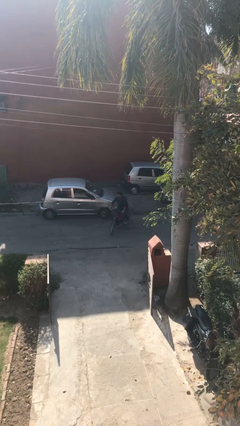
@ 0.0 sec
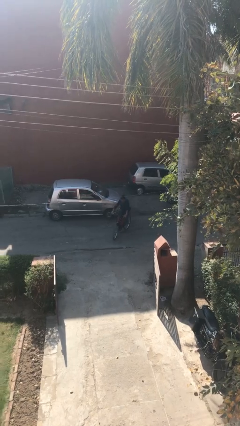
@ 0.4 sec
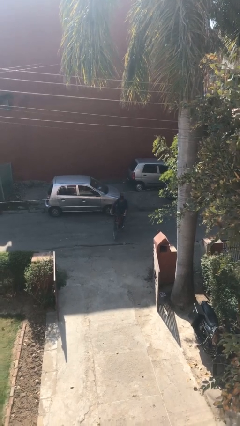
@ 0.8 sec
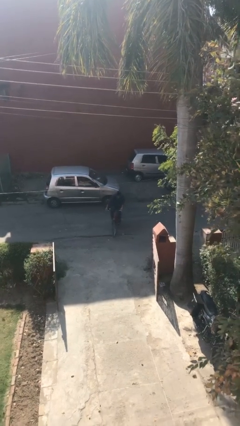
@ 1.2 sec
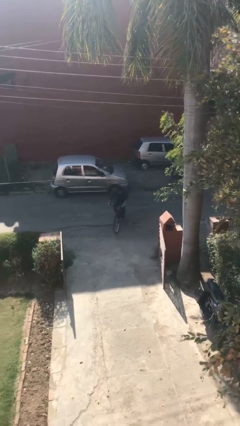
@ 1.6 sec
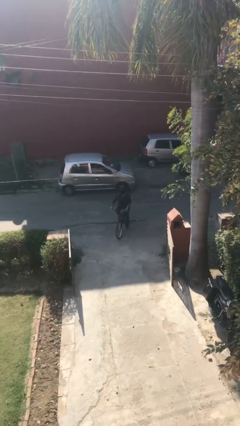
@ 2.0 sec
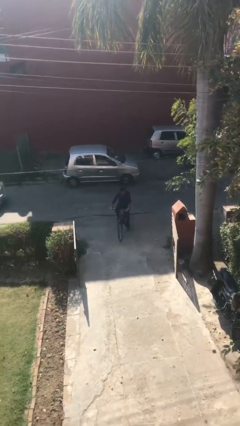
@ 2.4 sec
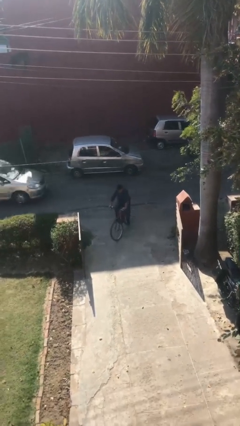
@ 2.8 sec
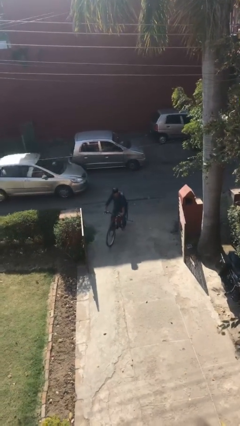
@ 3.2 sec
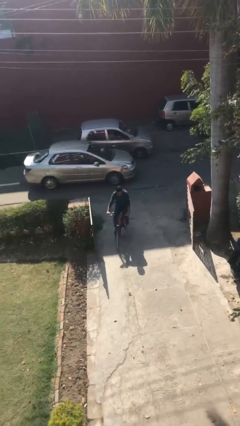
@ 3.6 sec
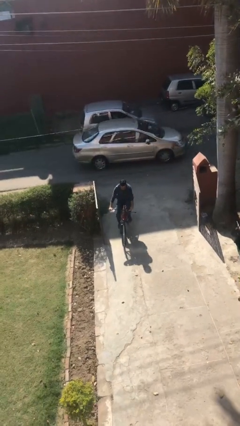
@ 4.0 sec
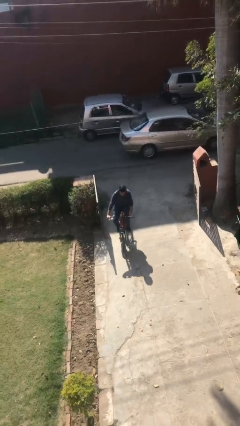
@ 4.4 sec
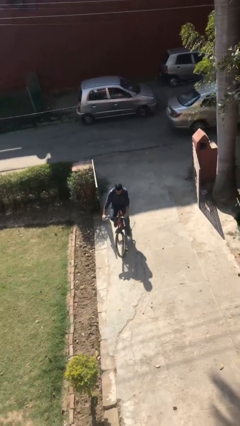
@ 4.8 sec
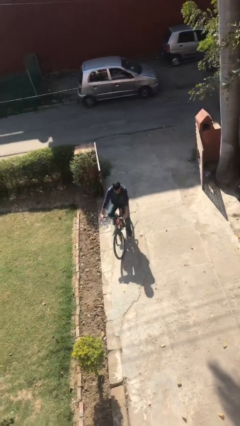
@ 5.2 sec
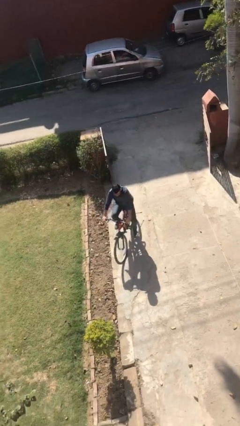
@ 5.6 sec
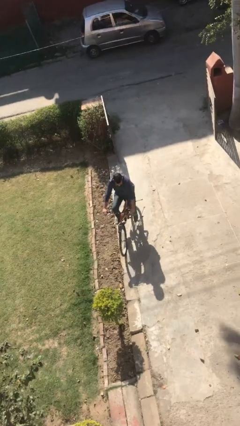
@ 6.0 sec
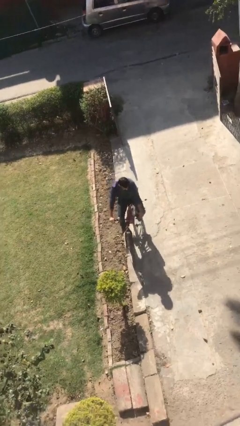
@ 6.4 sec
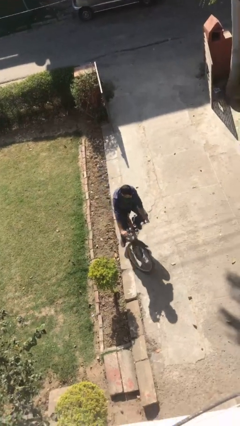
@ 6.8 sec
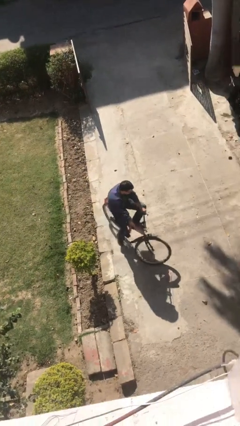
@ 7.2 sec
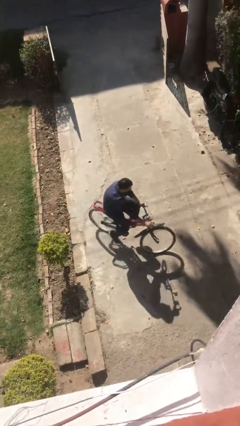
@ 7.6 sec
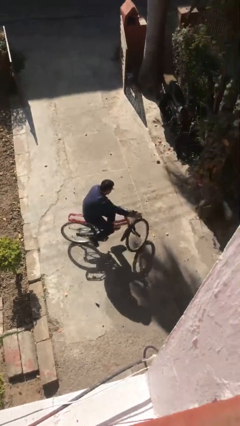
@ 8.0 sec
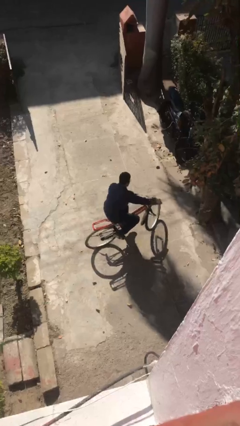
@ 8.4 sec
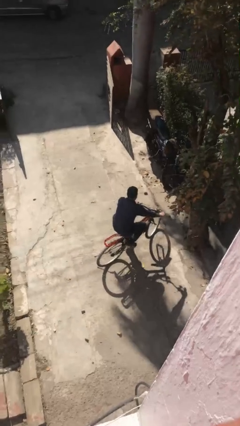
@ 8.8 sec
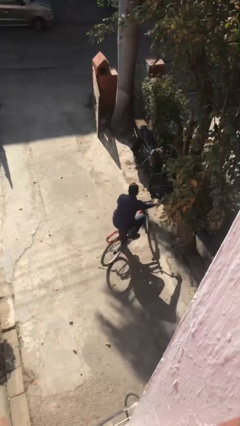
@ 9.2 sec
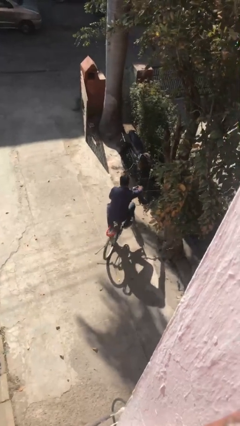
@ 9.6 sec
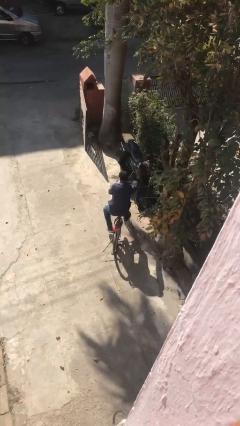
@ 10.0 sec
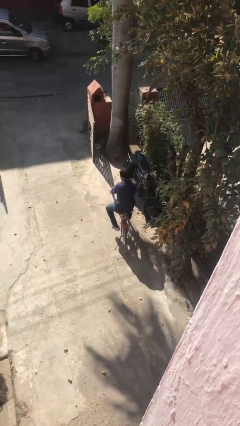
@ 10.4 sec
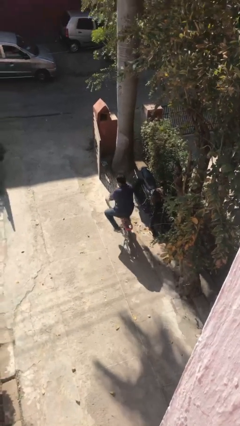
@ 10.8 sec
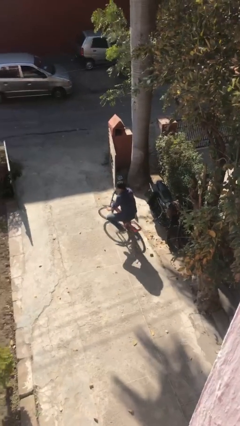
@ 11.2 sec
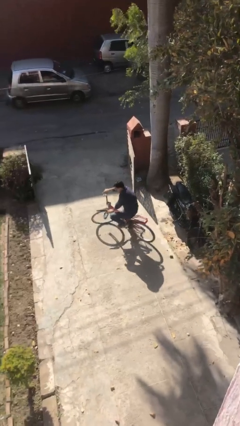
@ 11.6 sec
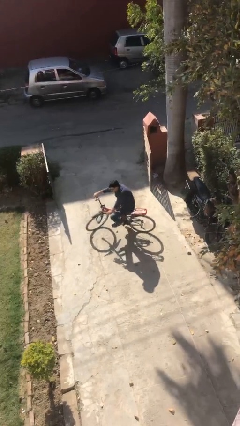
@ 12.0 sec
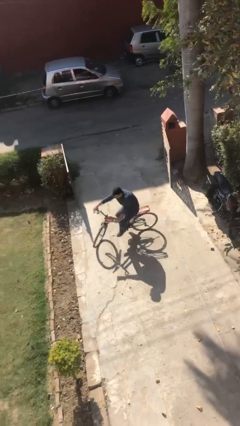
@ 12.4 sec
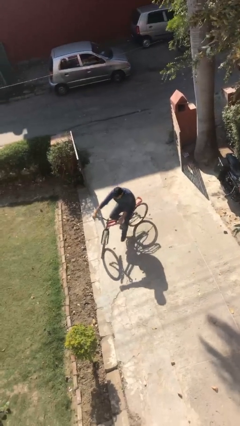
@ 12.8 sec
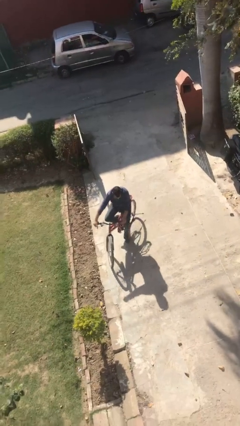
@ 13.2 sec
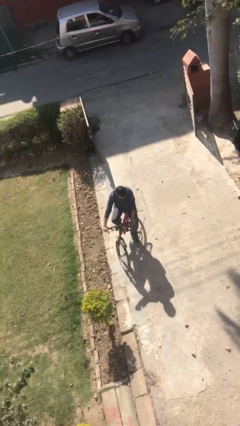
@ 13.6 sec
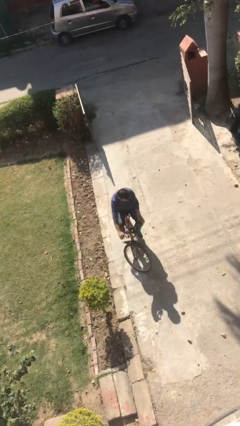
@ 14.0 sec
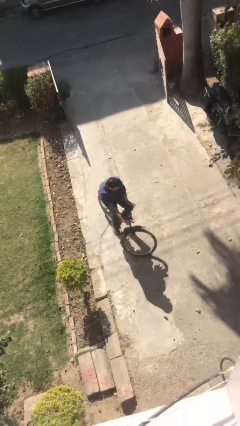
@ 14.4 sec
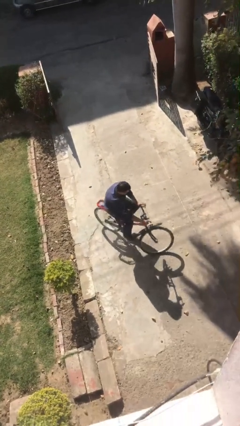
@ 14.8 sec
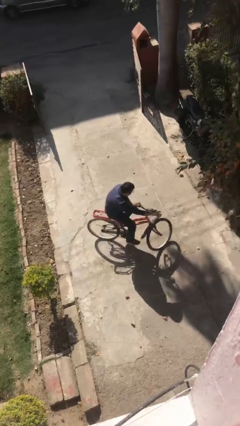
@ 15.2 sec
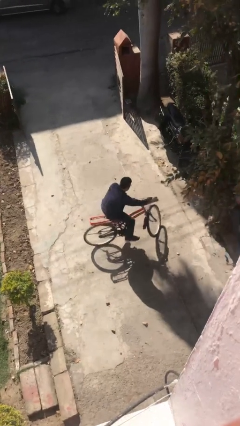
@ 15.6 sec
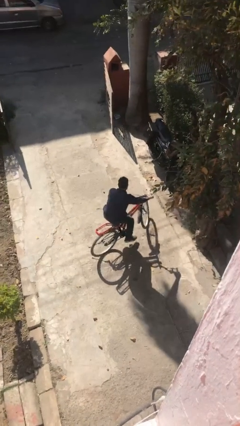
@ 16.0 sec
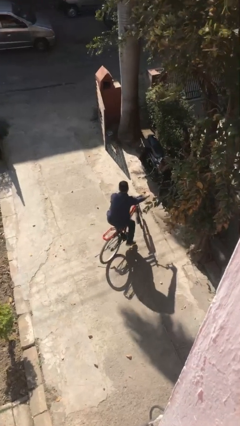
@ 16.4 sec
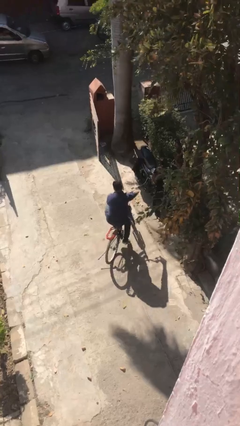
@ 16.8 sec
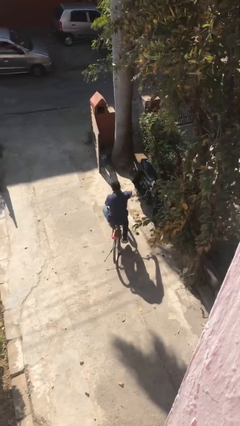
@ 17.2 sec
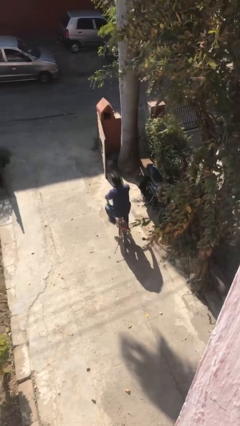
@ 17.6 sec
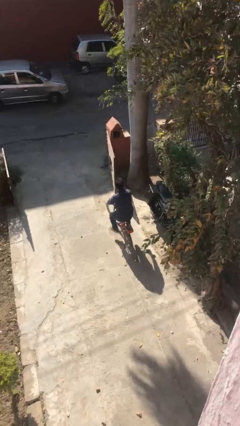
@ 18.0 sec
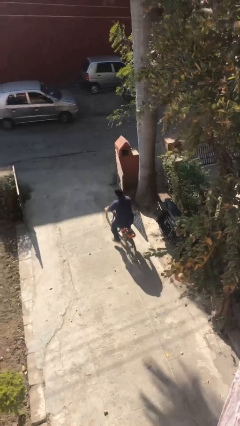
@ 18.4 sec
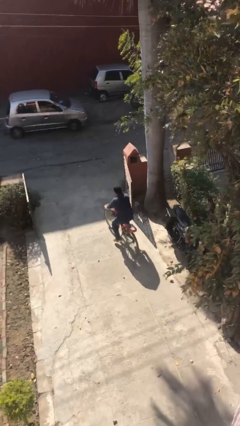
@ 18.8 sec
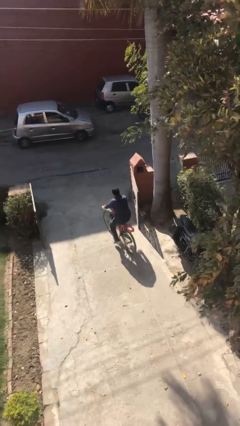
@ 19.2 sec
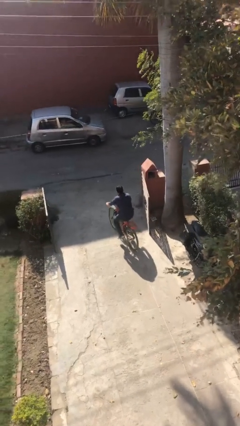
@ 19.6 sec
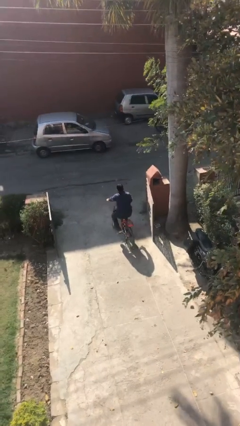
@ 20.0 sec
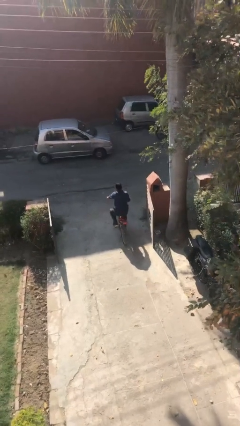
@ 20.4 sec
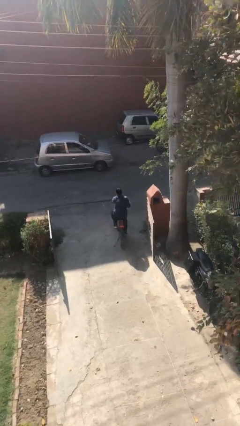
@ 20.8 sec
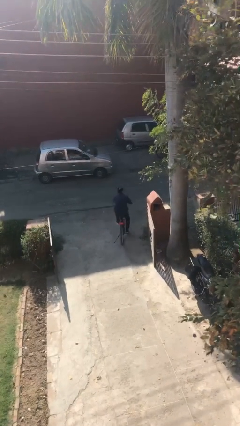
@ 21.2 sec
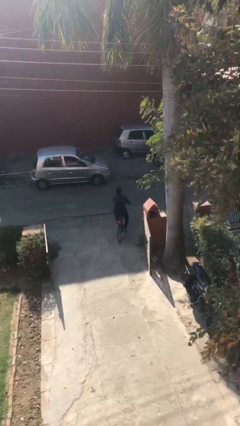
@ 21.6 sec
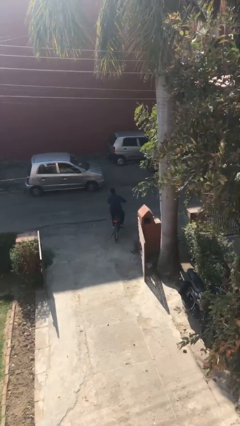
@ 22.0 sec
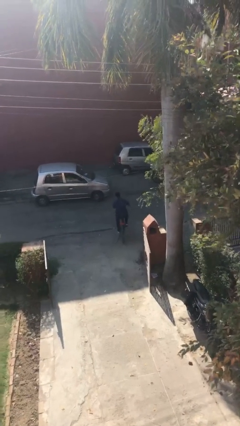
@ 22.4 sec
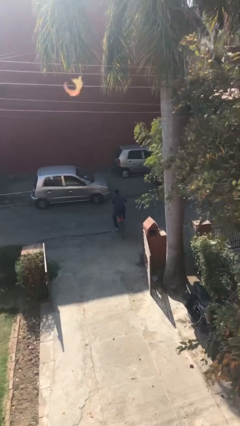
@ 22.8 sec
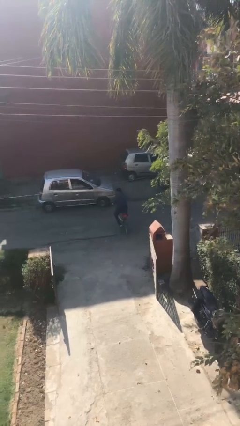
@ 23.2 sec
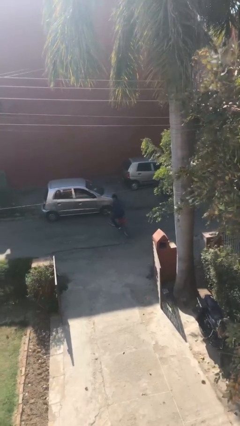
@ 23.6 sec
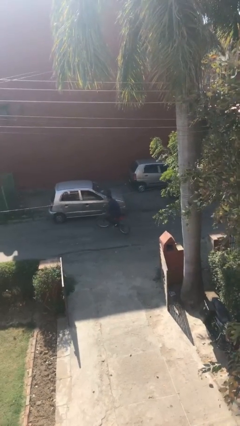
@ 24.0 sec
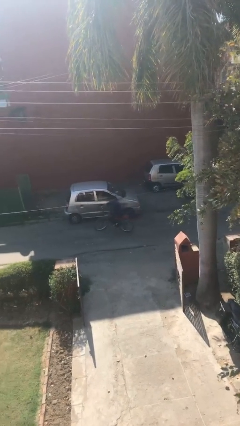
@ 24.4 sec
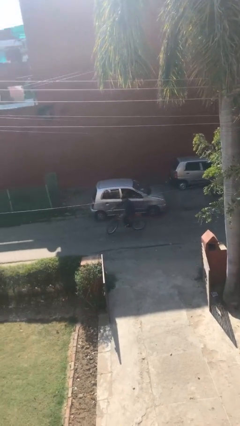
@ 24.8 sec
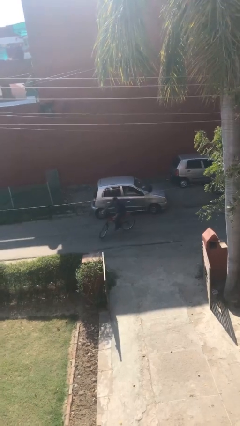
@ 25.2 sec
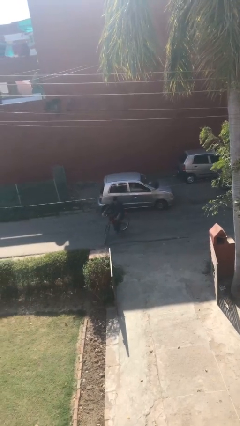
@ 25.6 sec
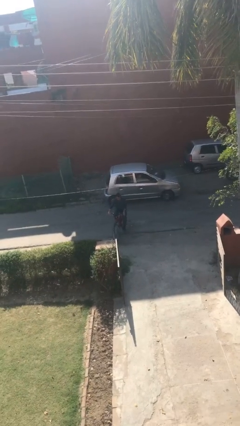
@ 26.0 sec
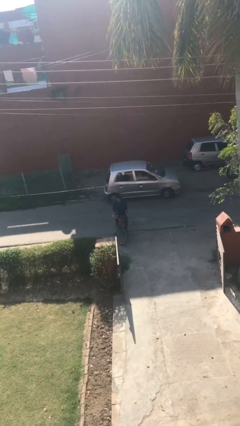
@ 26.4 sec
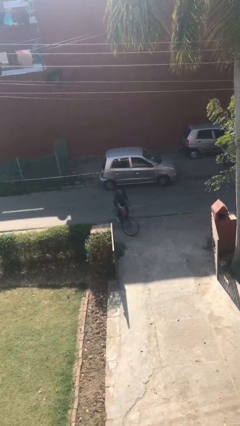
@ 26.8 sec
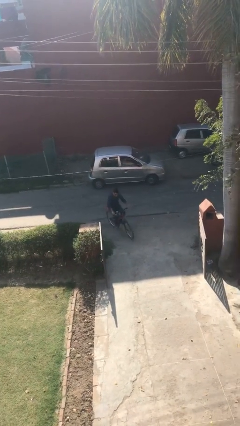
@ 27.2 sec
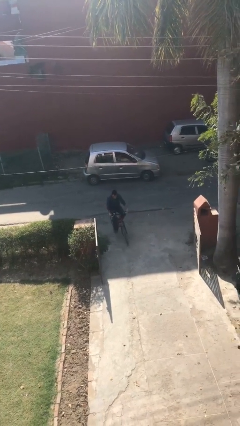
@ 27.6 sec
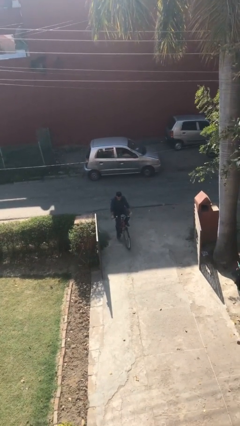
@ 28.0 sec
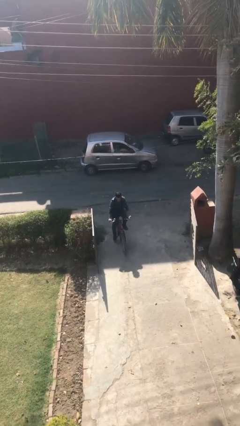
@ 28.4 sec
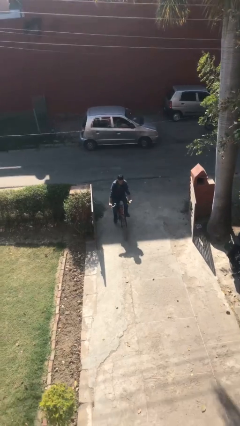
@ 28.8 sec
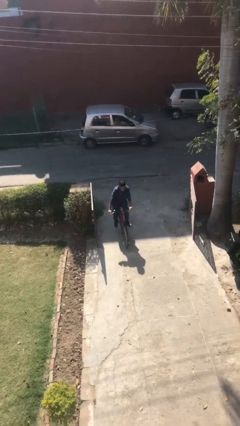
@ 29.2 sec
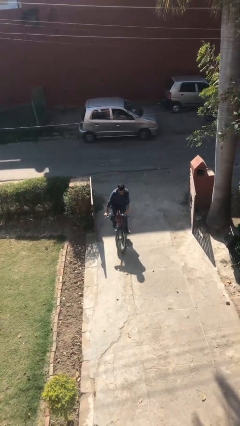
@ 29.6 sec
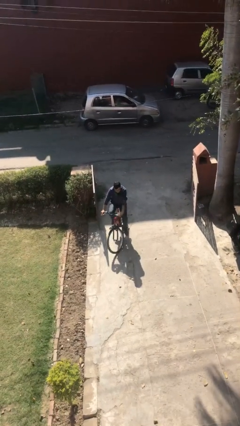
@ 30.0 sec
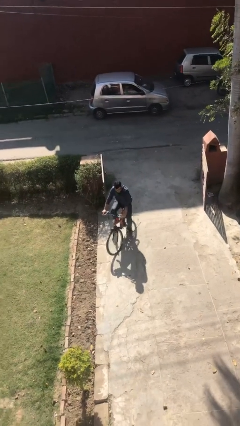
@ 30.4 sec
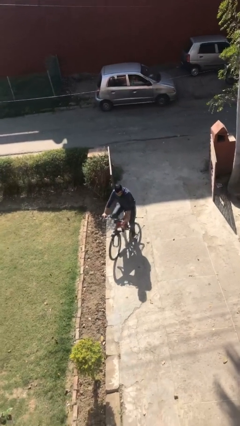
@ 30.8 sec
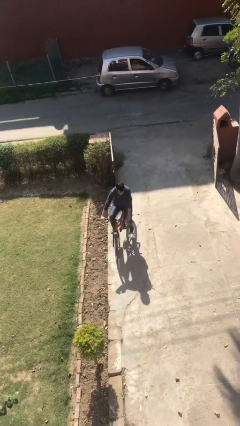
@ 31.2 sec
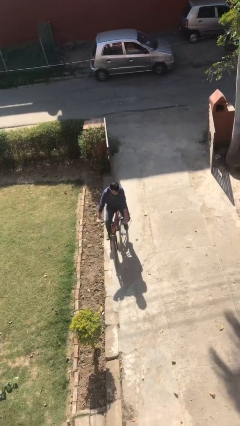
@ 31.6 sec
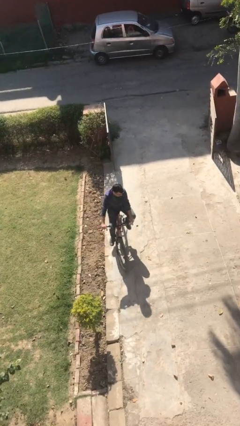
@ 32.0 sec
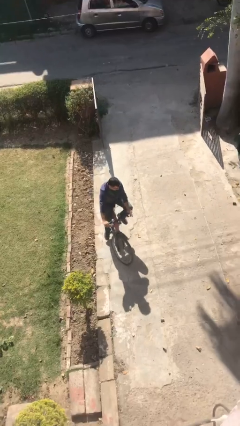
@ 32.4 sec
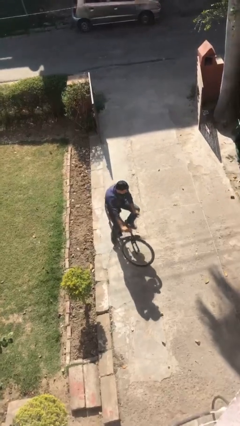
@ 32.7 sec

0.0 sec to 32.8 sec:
person rides bicycle

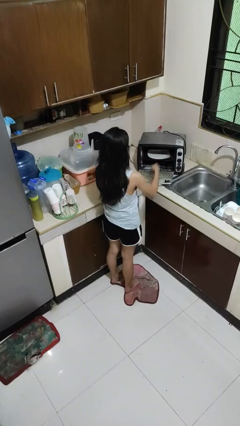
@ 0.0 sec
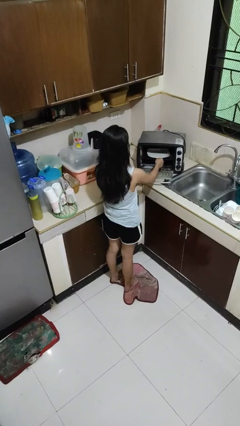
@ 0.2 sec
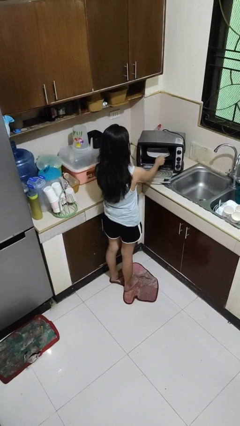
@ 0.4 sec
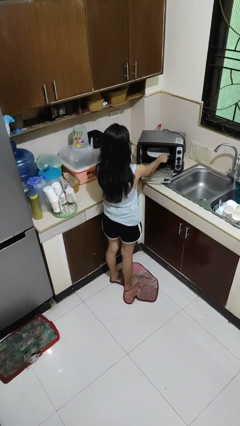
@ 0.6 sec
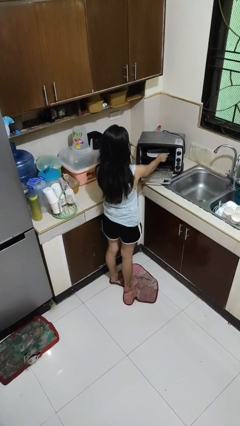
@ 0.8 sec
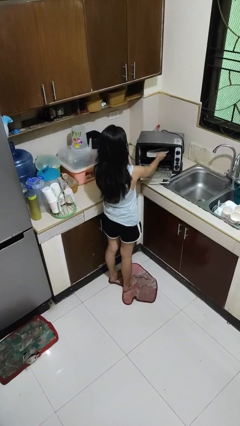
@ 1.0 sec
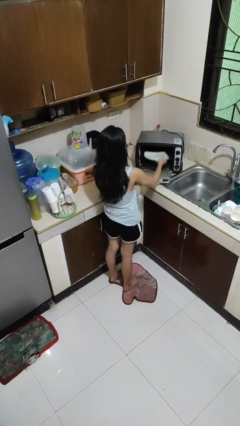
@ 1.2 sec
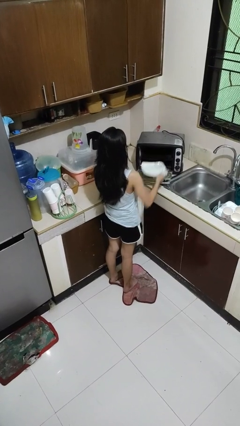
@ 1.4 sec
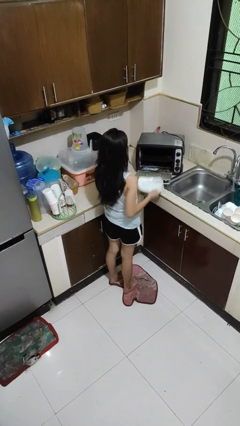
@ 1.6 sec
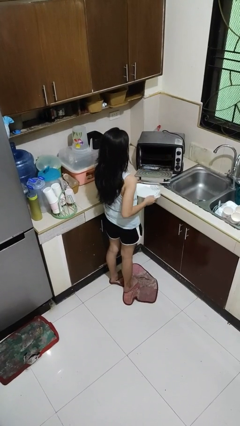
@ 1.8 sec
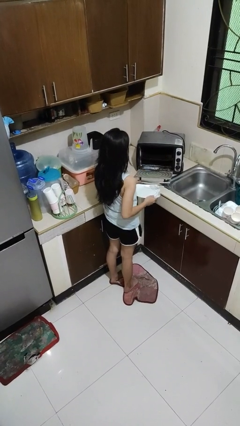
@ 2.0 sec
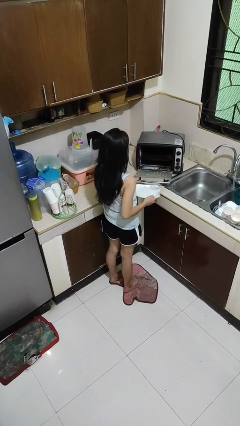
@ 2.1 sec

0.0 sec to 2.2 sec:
person takes object from microwave
